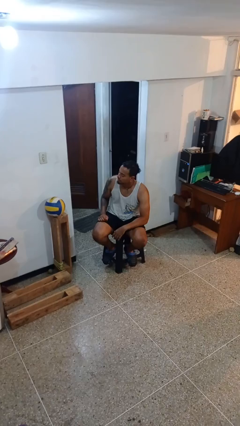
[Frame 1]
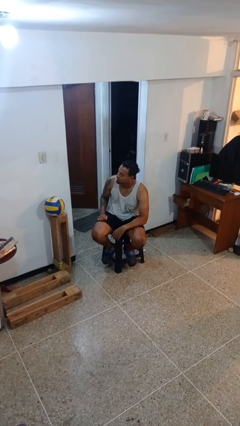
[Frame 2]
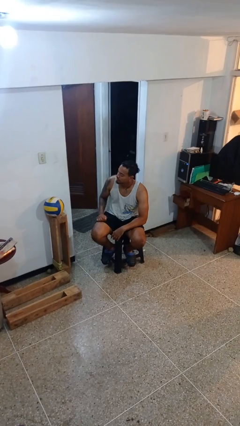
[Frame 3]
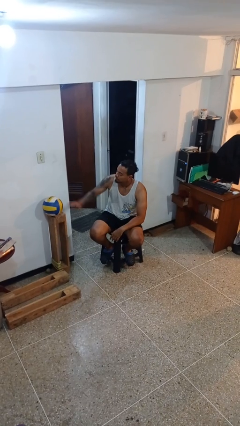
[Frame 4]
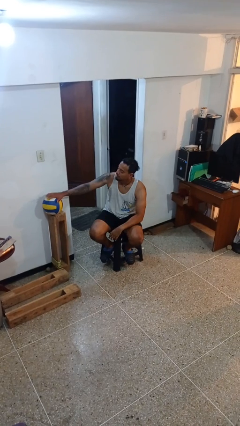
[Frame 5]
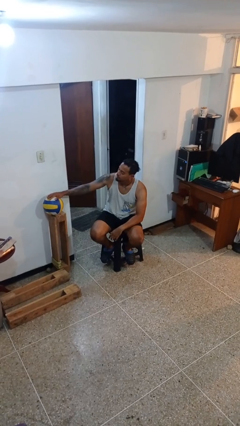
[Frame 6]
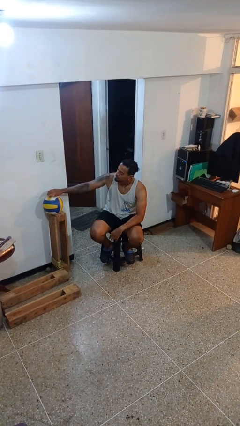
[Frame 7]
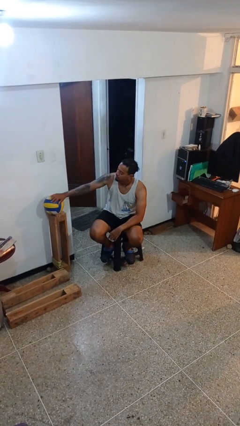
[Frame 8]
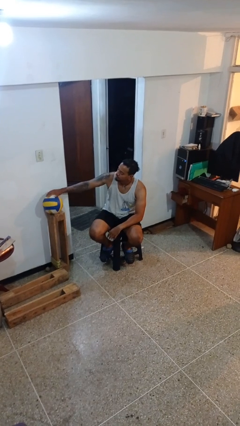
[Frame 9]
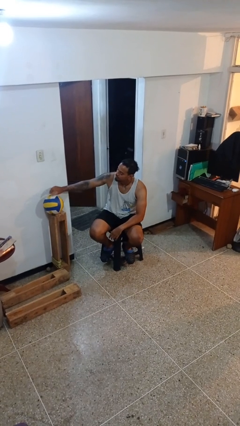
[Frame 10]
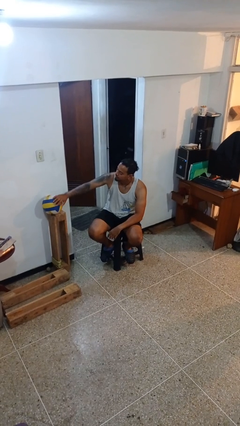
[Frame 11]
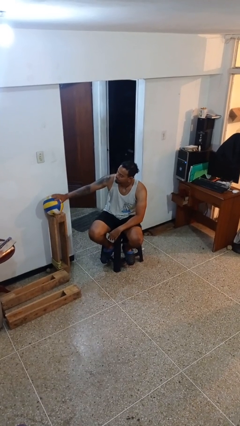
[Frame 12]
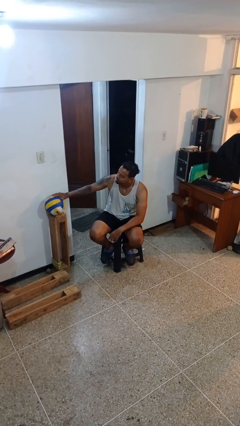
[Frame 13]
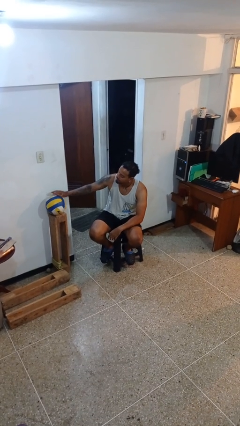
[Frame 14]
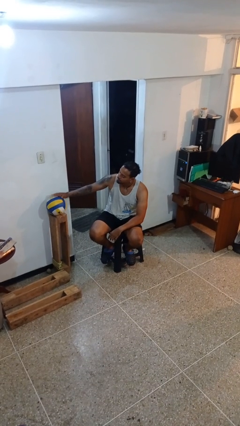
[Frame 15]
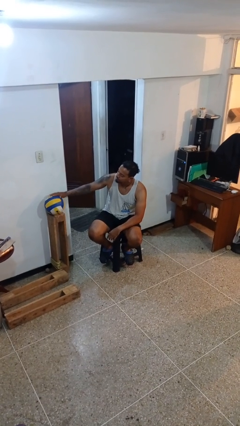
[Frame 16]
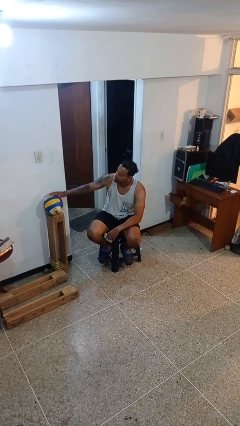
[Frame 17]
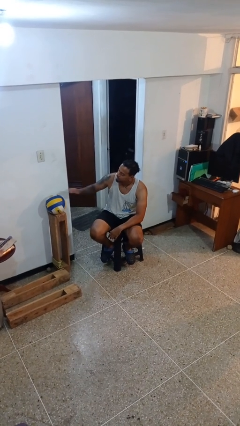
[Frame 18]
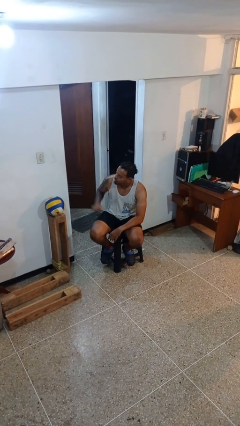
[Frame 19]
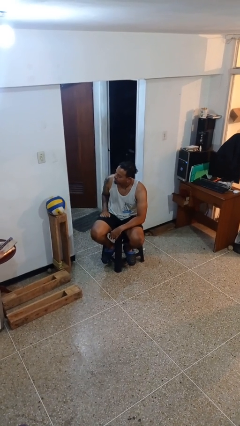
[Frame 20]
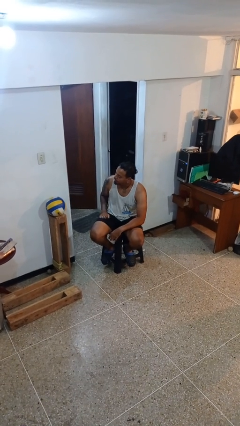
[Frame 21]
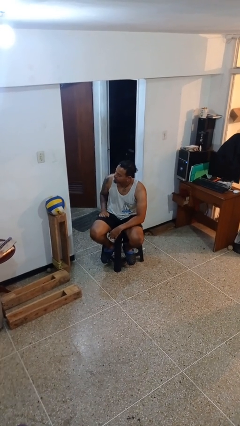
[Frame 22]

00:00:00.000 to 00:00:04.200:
person waves hand over object

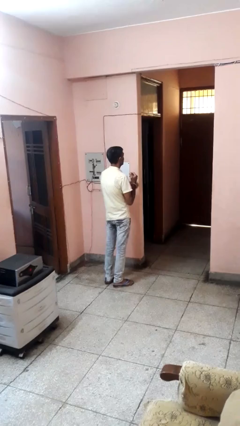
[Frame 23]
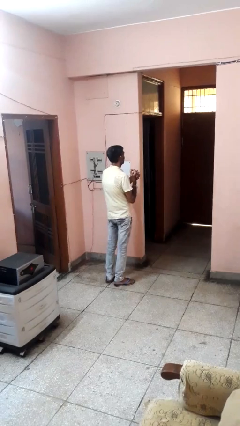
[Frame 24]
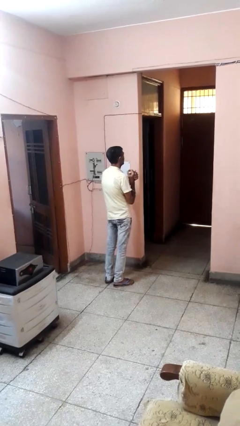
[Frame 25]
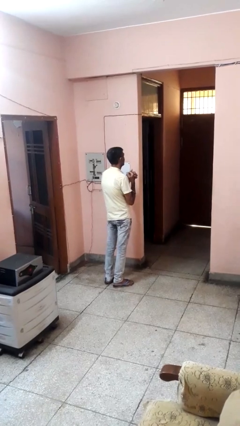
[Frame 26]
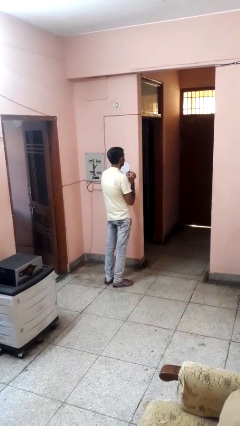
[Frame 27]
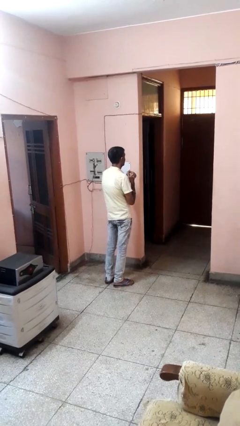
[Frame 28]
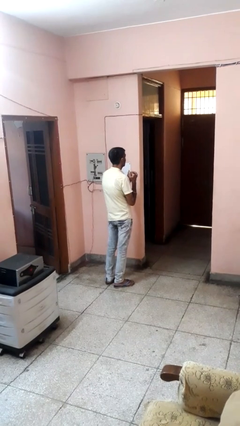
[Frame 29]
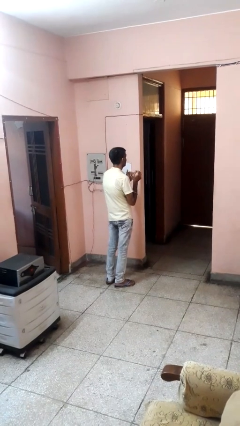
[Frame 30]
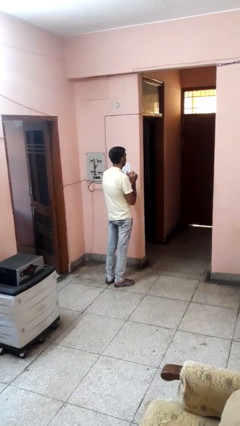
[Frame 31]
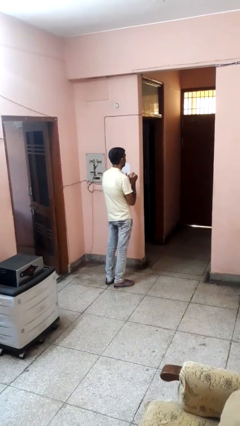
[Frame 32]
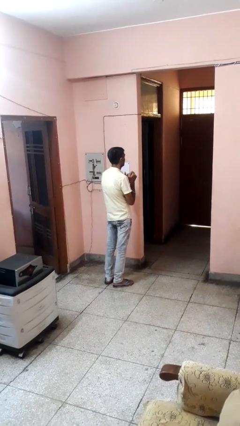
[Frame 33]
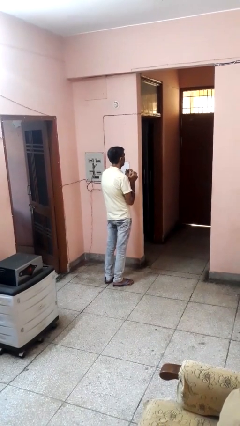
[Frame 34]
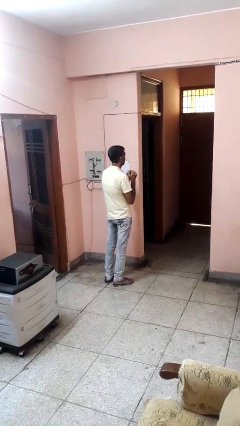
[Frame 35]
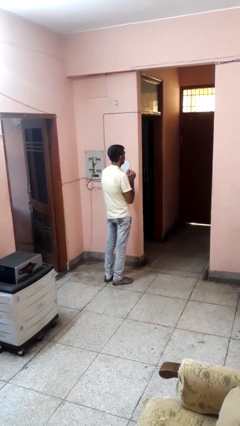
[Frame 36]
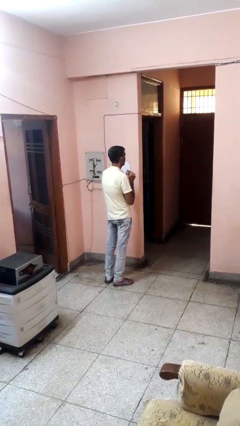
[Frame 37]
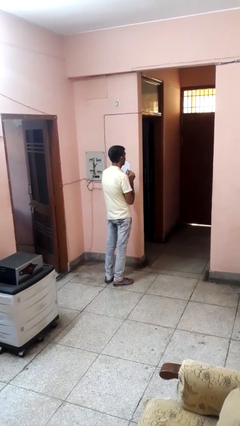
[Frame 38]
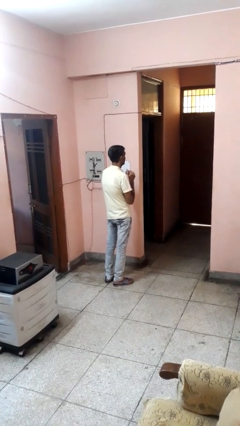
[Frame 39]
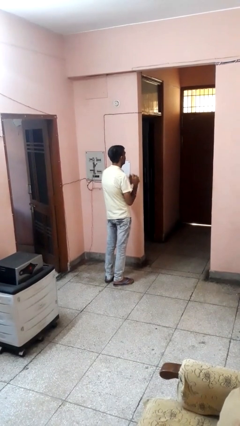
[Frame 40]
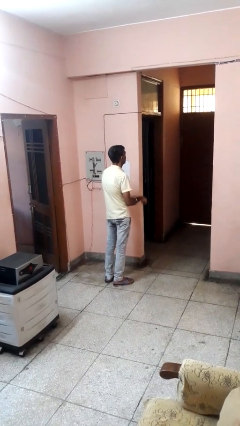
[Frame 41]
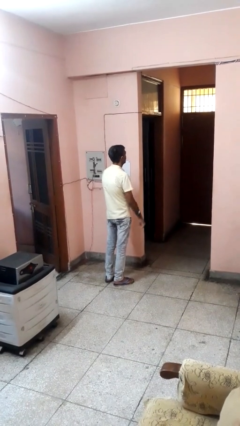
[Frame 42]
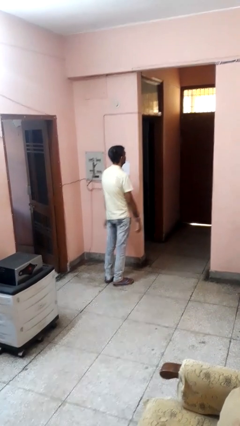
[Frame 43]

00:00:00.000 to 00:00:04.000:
person cracks knuckles

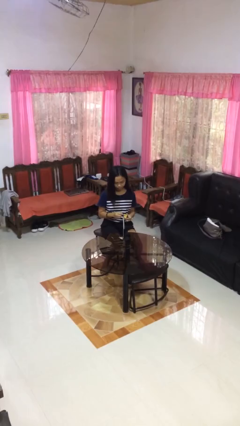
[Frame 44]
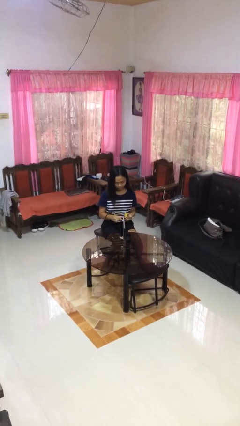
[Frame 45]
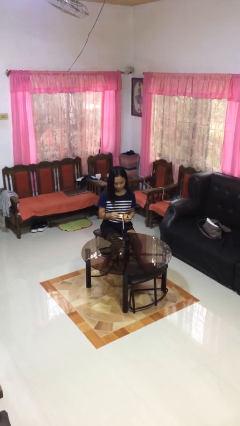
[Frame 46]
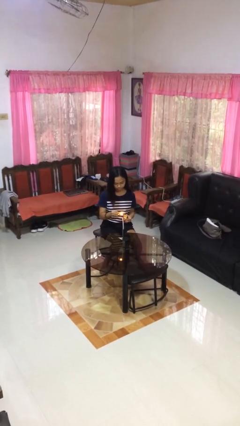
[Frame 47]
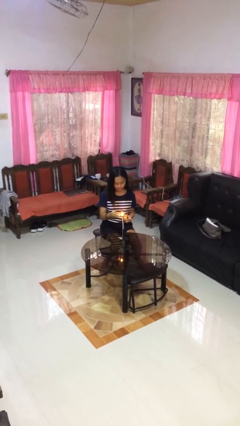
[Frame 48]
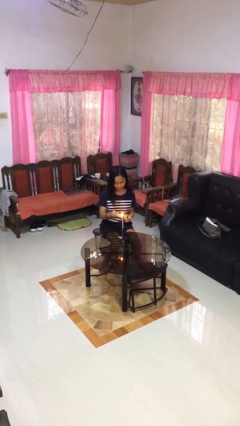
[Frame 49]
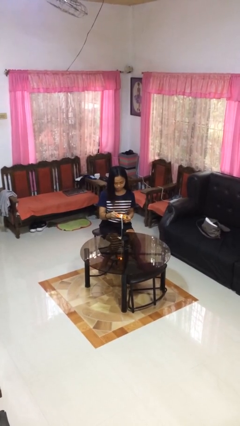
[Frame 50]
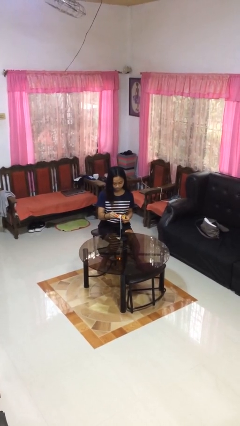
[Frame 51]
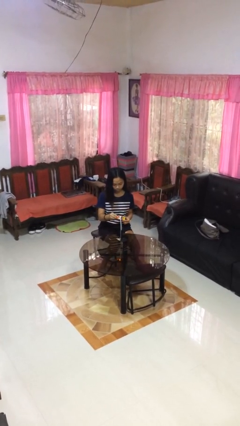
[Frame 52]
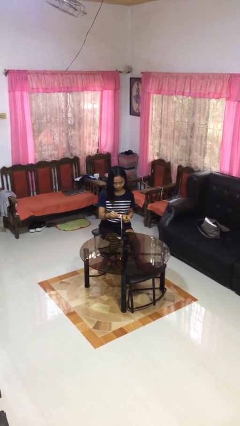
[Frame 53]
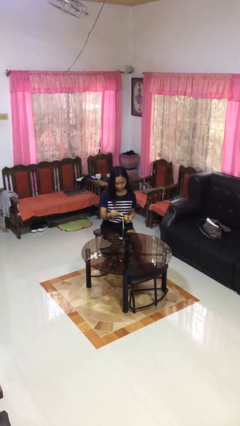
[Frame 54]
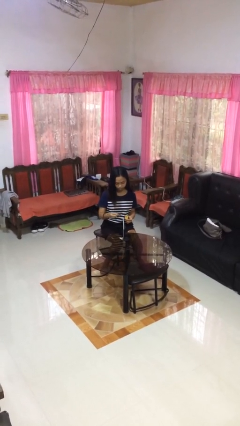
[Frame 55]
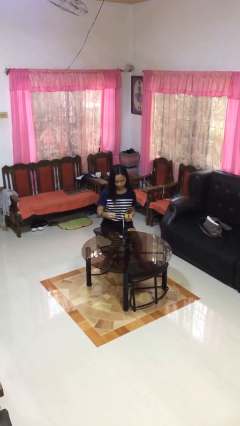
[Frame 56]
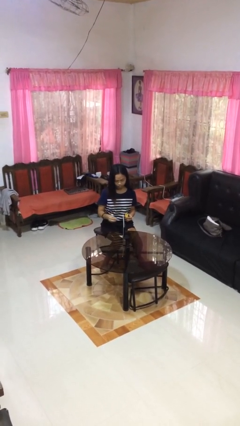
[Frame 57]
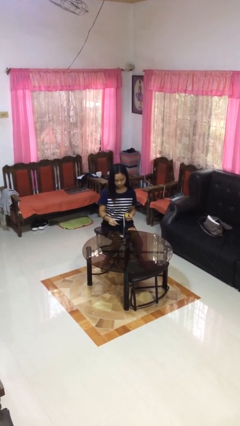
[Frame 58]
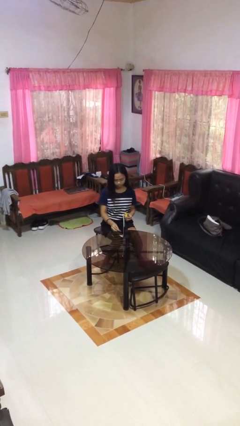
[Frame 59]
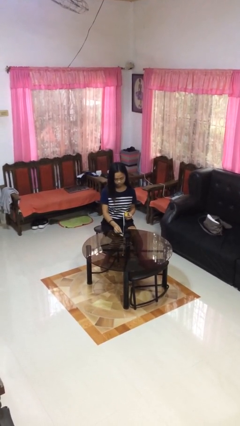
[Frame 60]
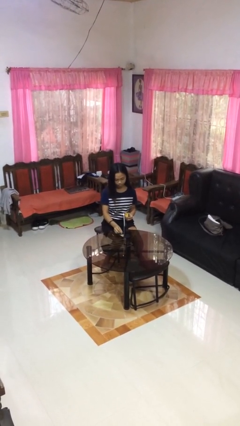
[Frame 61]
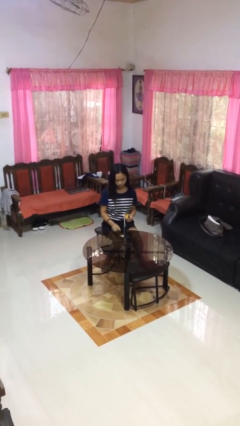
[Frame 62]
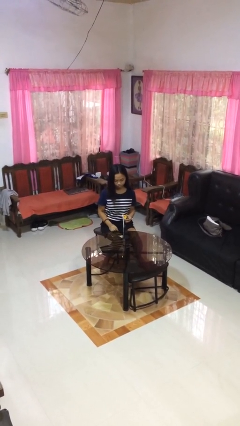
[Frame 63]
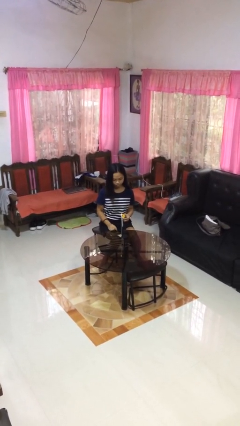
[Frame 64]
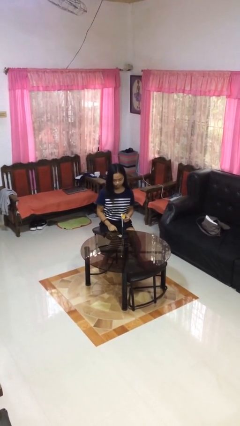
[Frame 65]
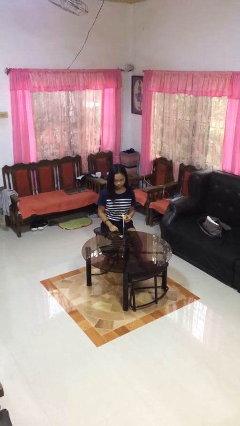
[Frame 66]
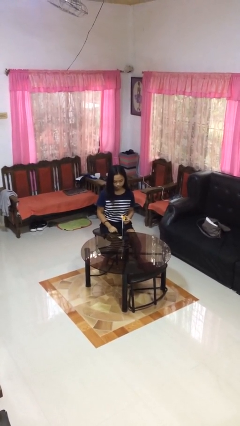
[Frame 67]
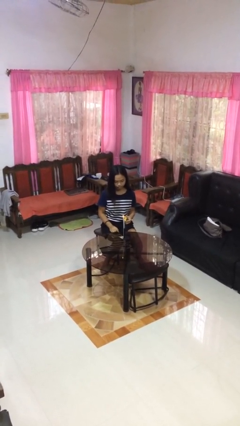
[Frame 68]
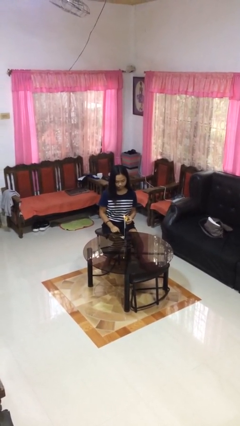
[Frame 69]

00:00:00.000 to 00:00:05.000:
person lights candle

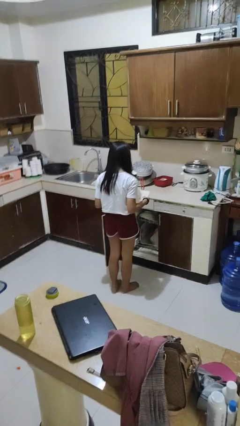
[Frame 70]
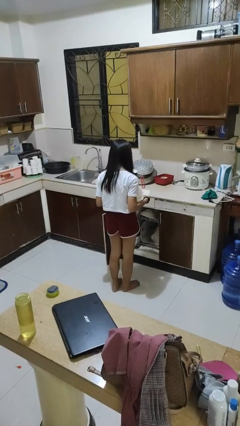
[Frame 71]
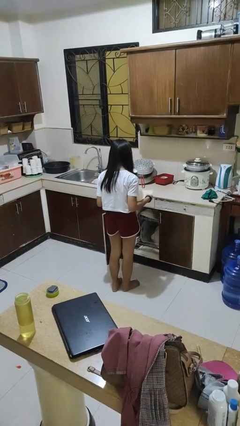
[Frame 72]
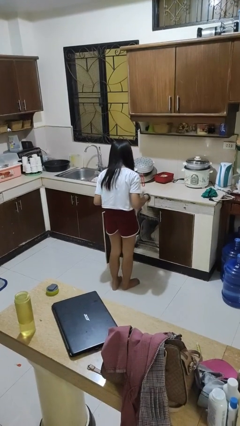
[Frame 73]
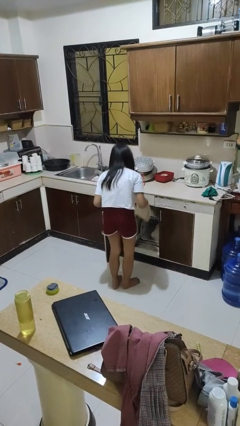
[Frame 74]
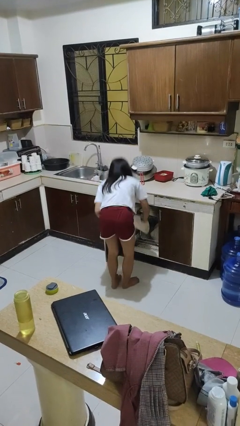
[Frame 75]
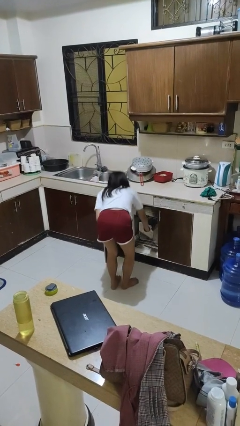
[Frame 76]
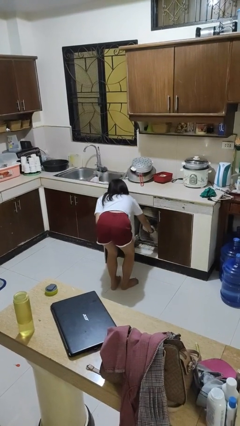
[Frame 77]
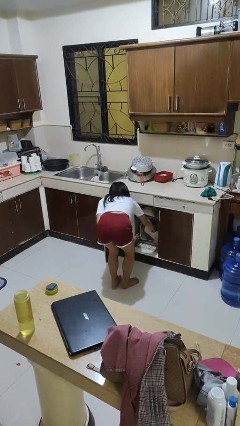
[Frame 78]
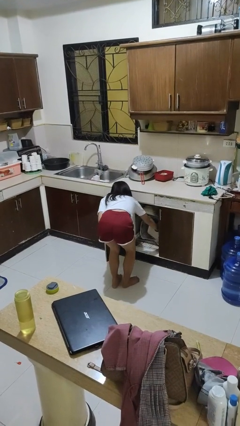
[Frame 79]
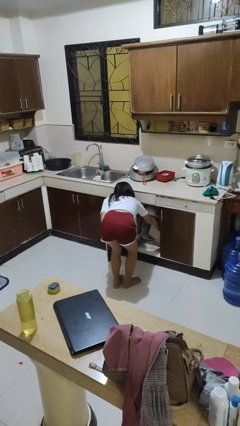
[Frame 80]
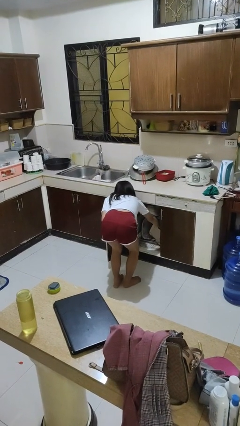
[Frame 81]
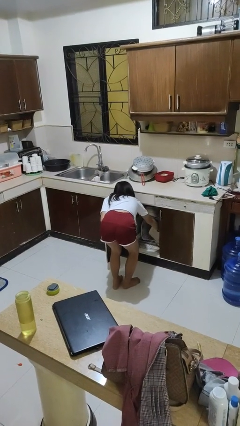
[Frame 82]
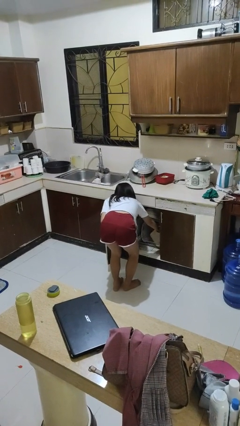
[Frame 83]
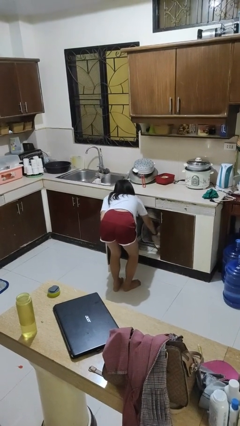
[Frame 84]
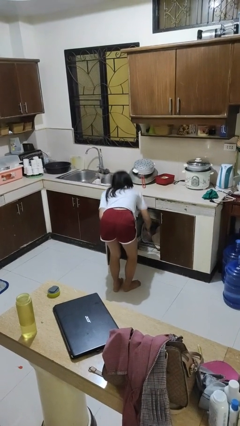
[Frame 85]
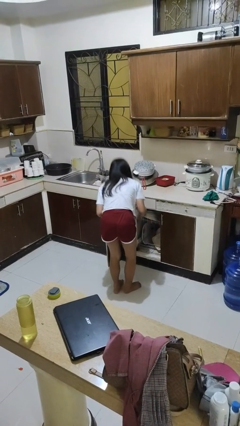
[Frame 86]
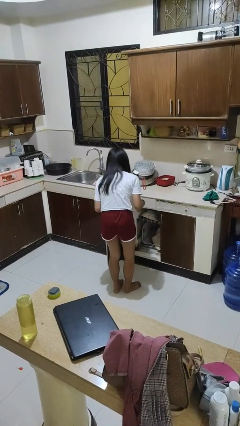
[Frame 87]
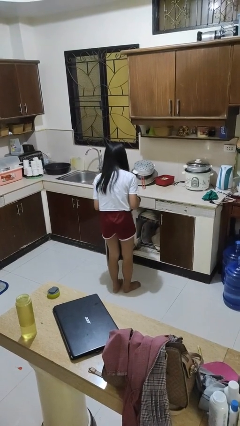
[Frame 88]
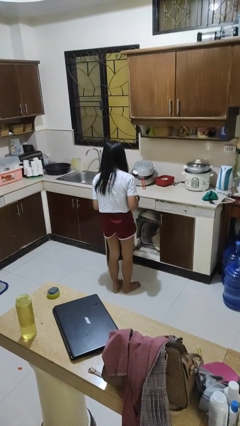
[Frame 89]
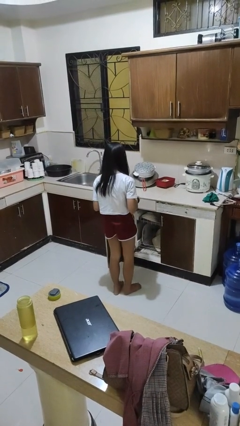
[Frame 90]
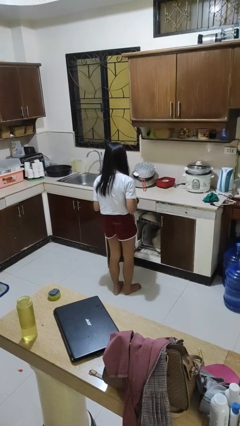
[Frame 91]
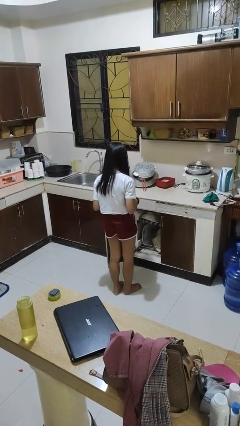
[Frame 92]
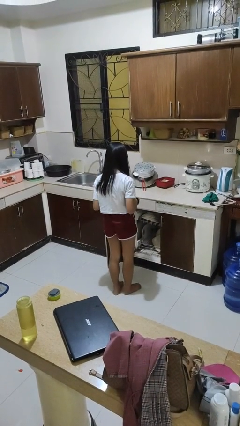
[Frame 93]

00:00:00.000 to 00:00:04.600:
person loads dishwasher
